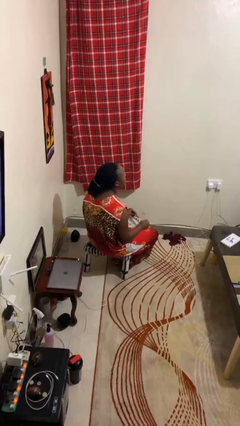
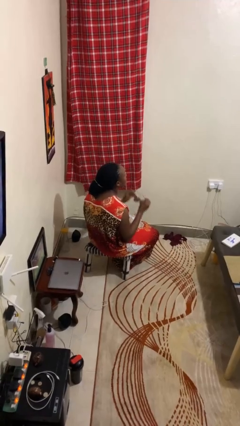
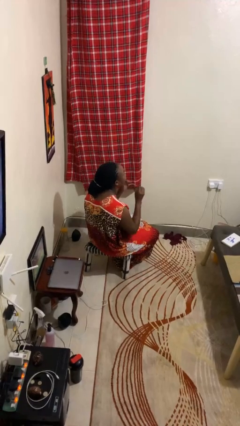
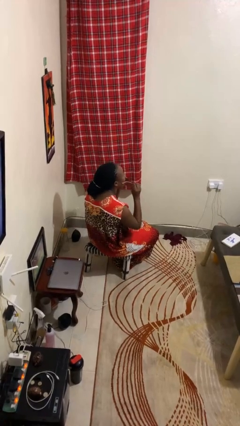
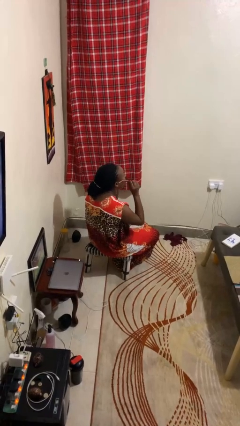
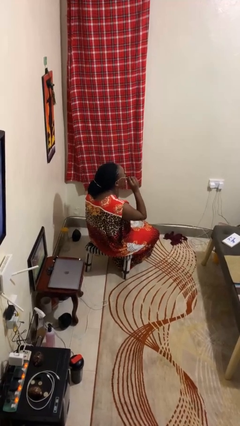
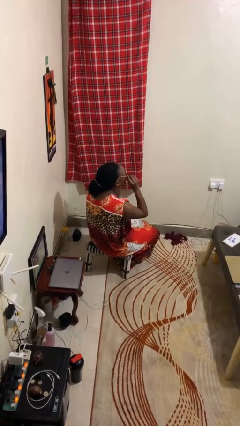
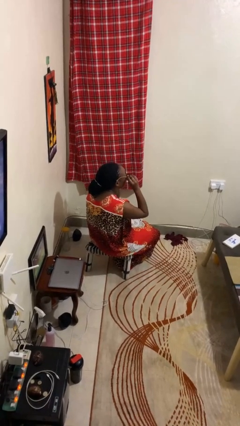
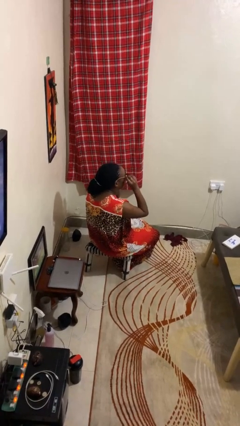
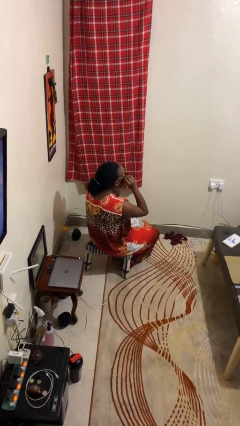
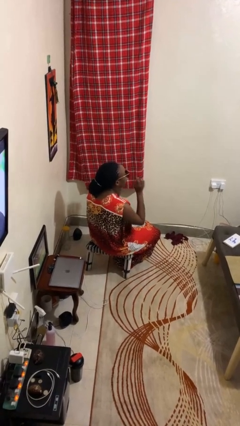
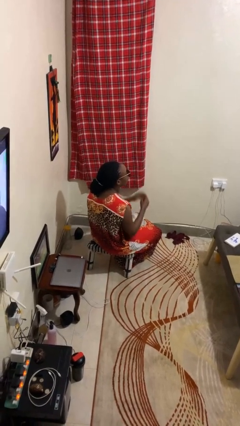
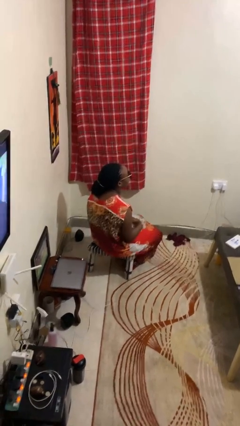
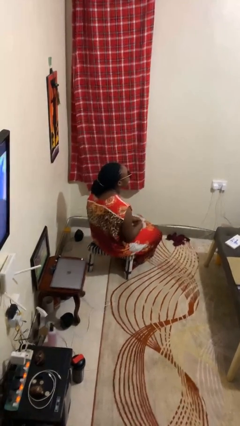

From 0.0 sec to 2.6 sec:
person puts on sunglasses

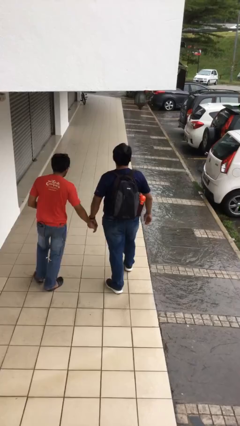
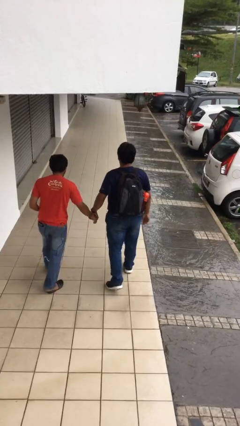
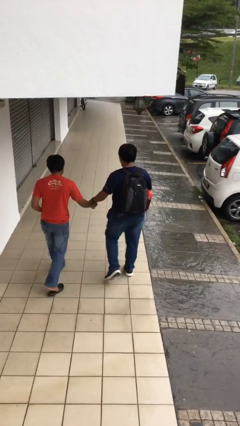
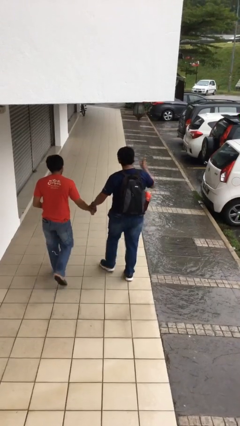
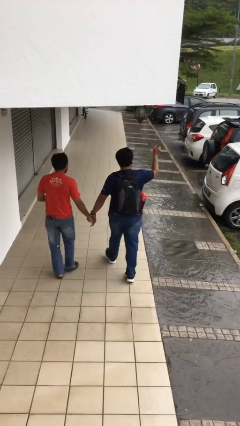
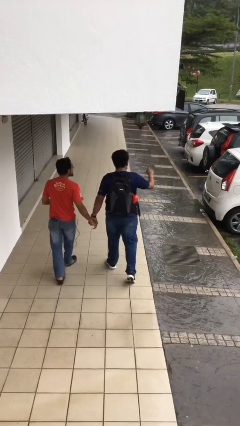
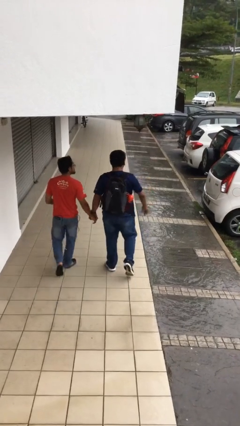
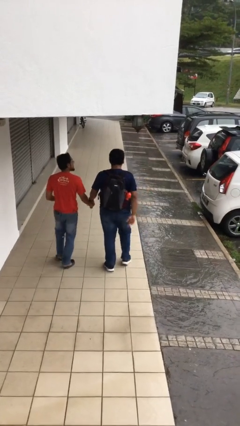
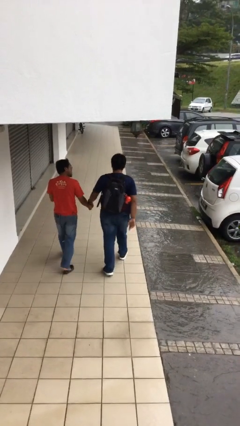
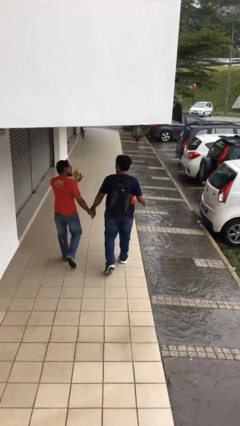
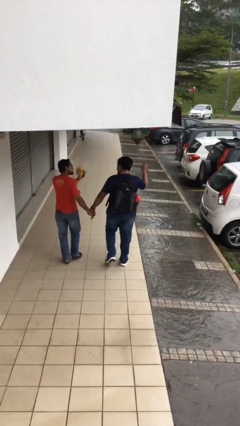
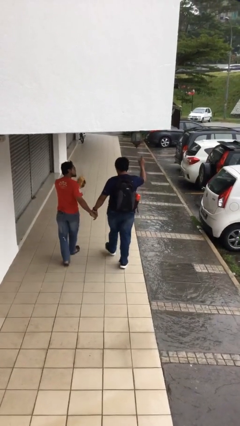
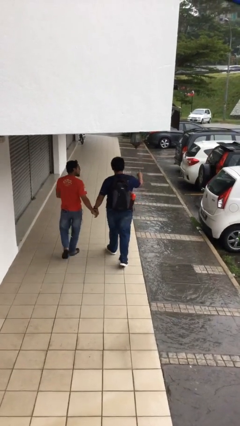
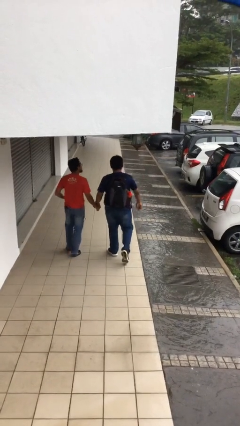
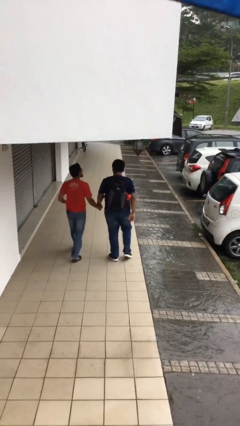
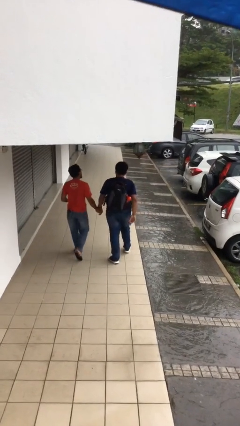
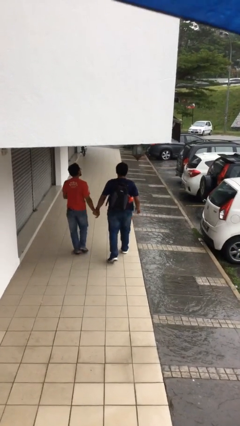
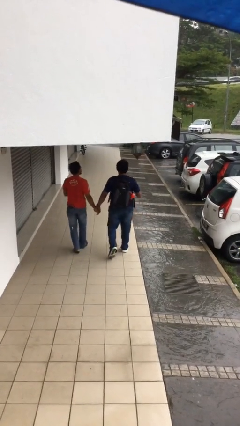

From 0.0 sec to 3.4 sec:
person holds hand

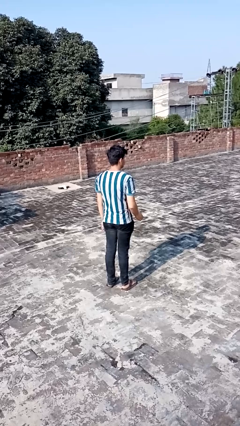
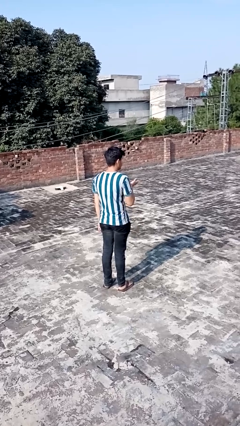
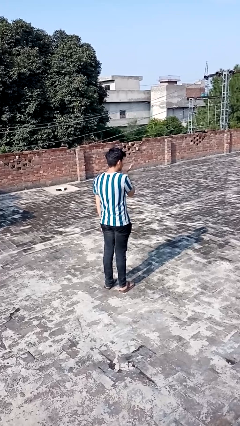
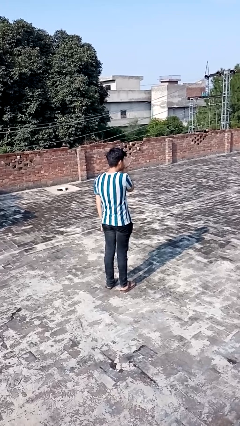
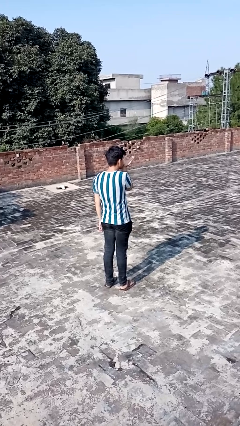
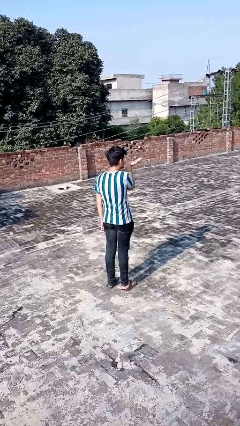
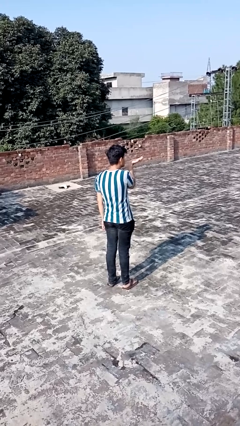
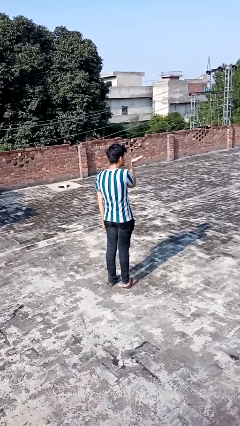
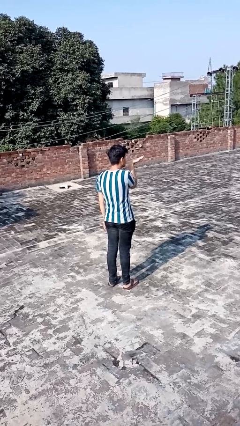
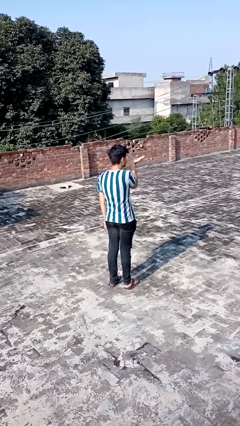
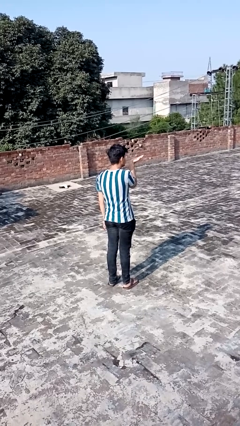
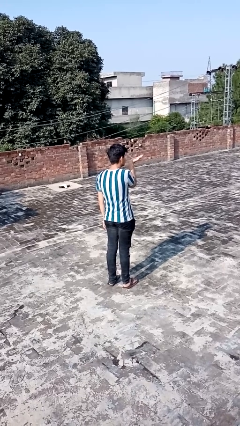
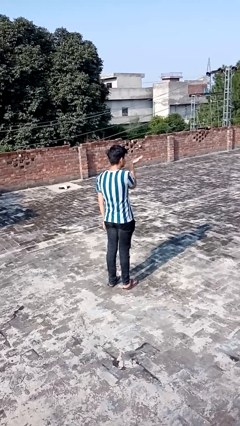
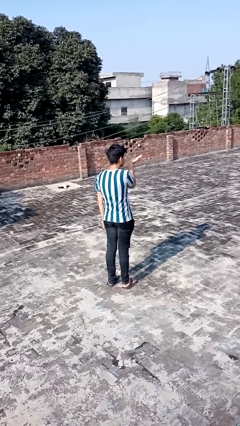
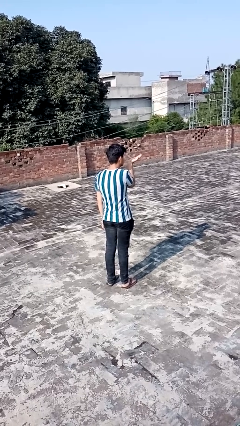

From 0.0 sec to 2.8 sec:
person gestures blow kiss

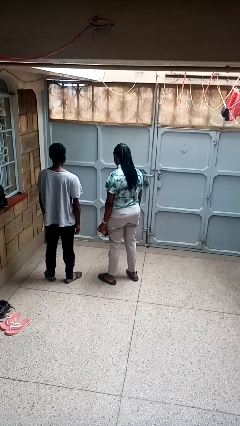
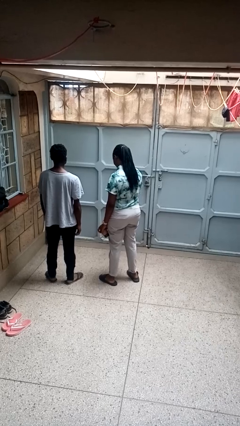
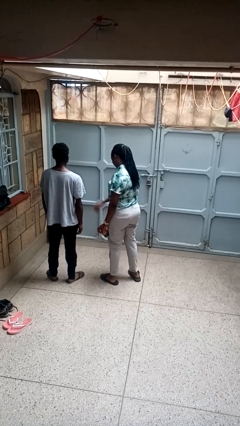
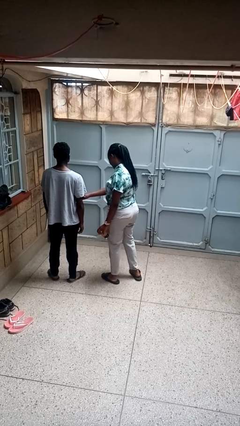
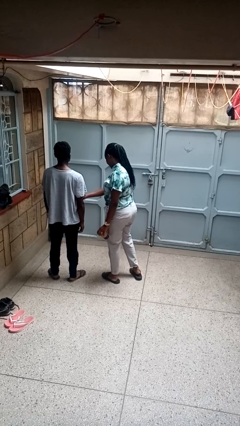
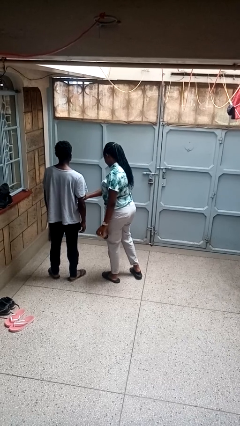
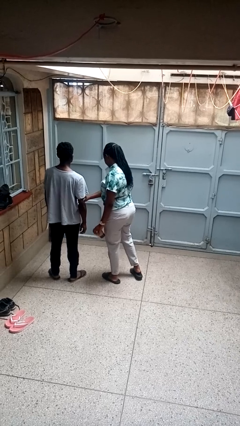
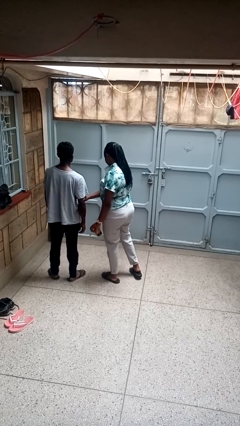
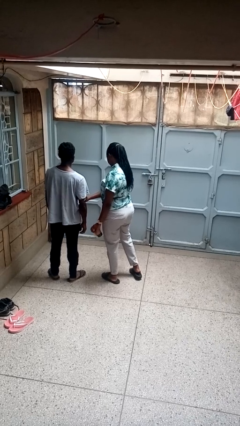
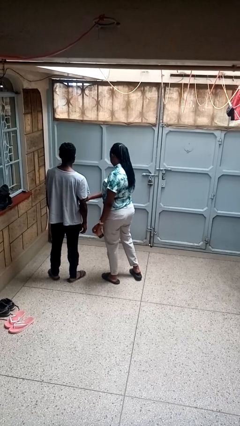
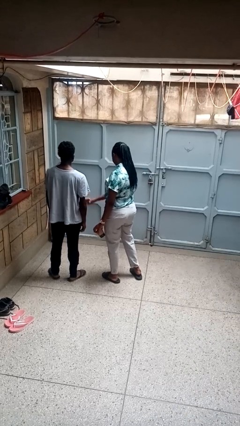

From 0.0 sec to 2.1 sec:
person grabs person by bicep

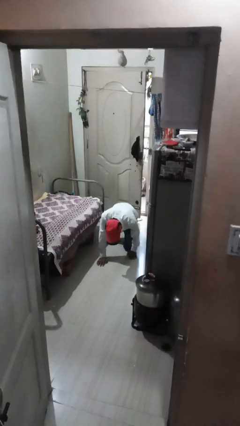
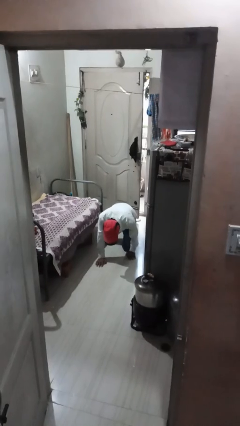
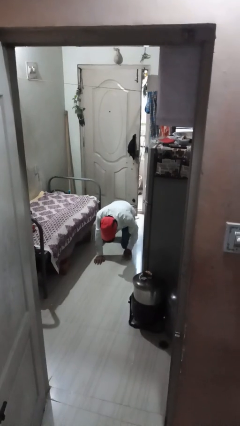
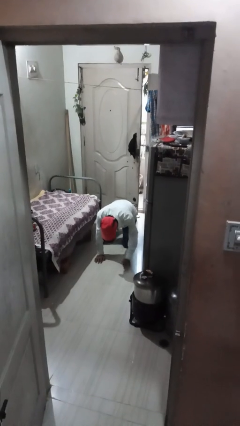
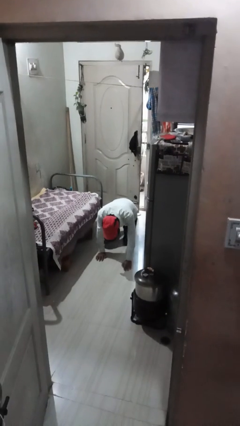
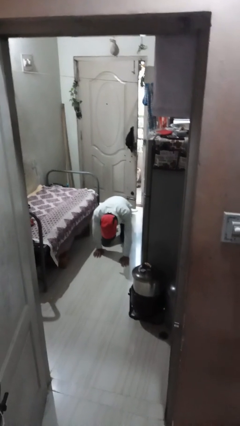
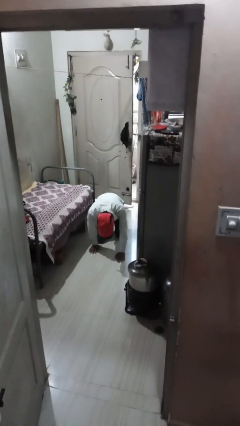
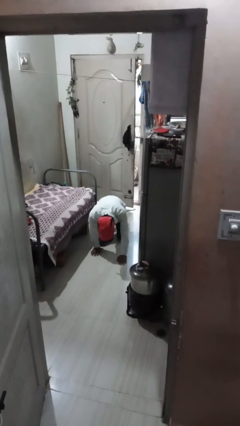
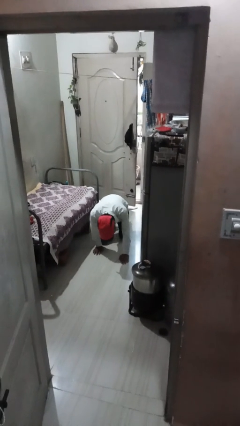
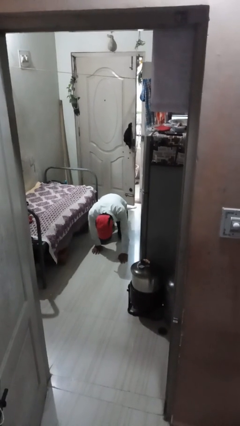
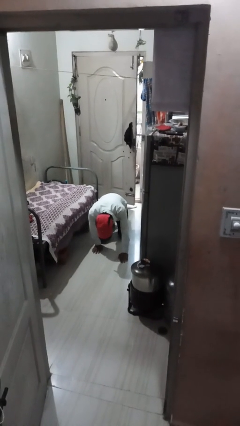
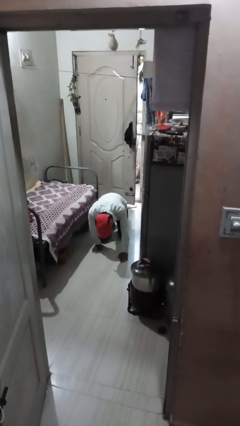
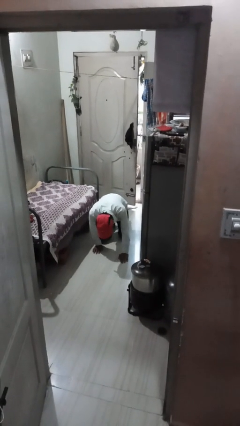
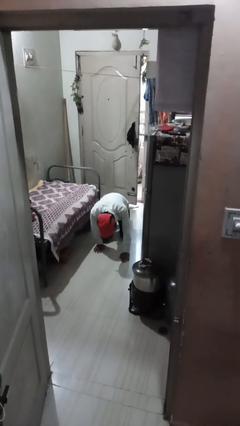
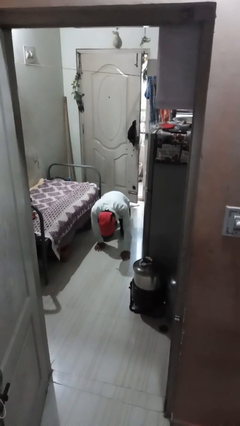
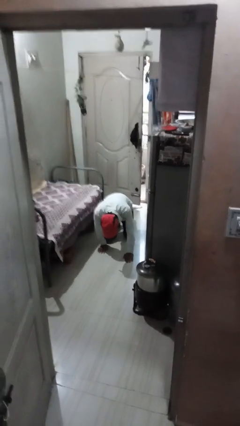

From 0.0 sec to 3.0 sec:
person crawls

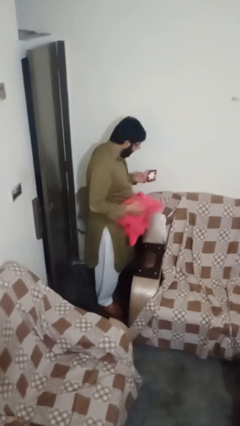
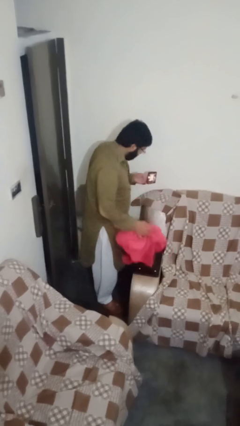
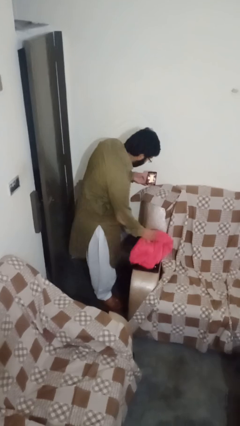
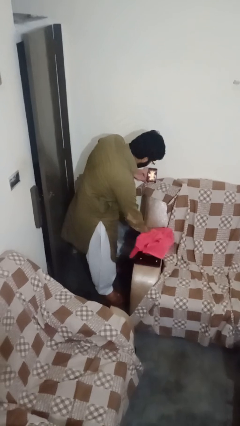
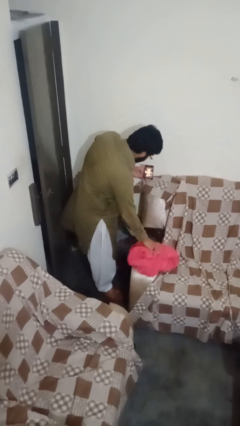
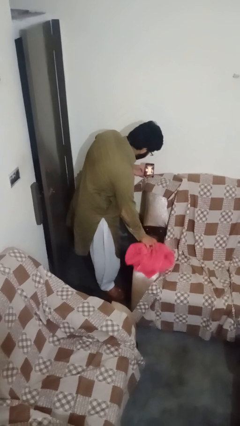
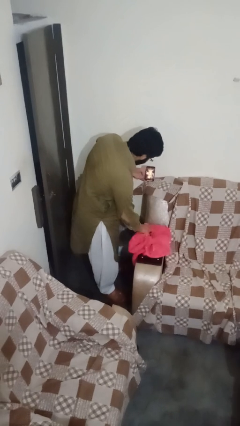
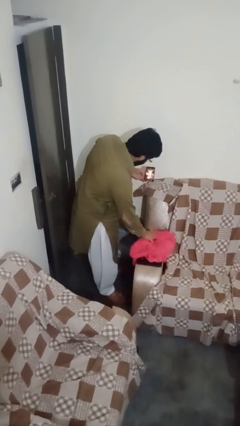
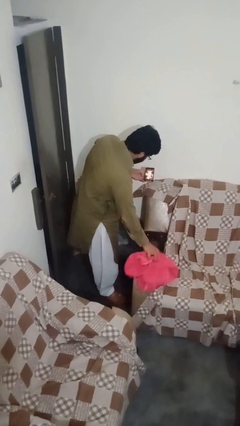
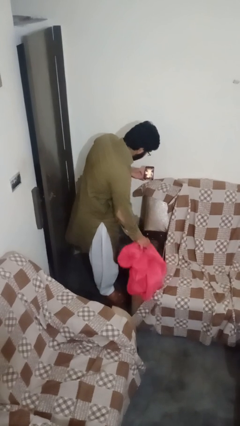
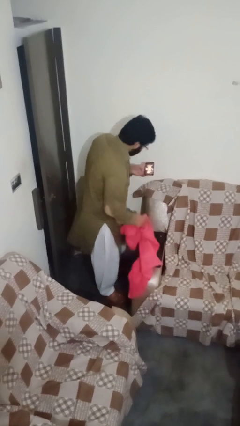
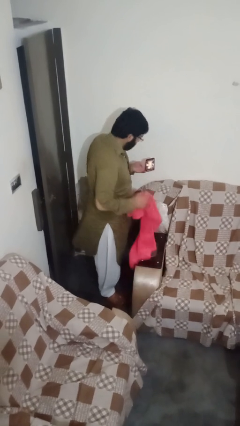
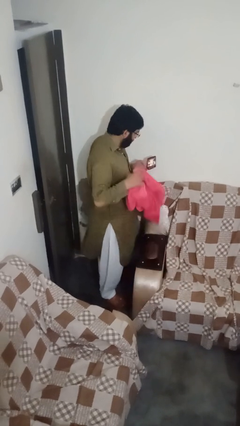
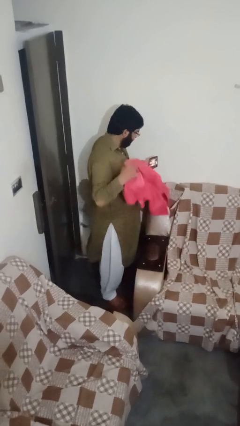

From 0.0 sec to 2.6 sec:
person dusts furniture

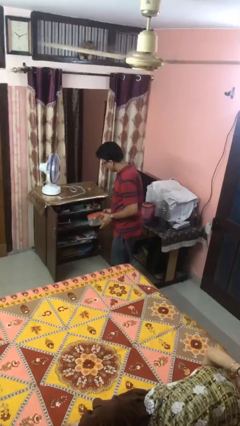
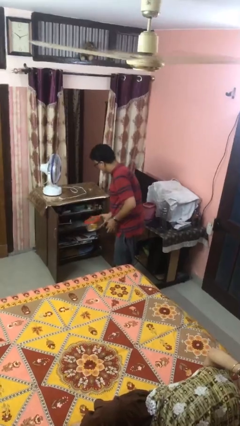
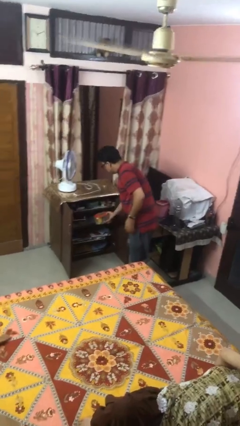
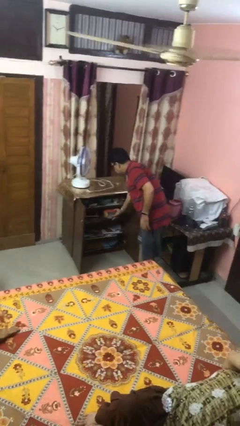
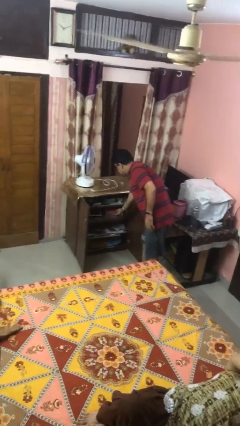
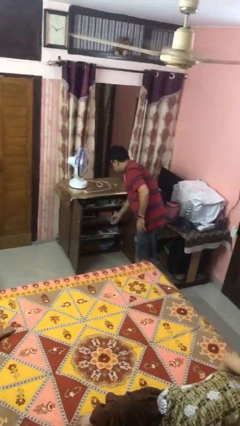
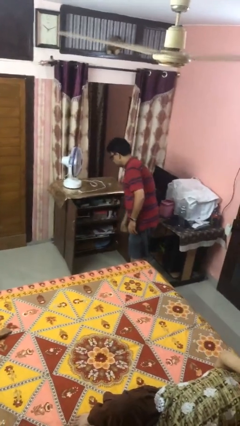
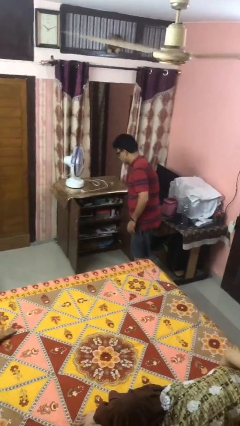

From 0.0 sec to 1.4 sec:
person puts down object into cabinet
